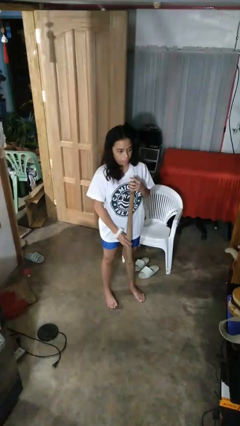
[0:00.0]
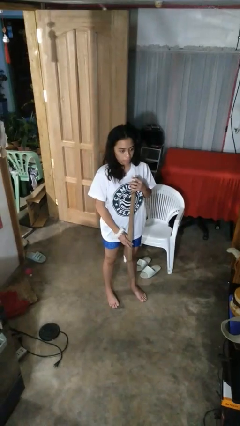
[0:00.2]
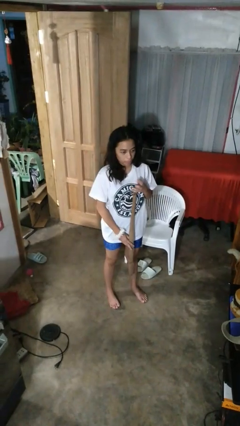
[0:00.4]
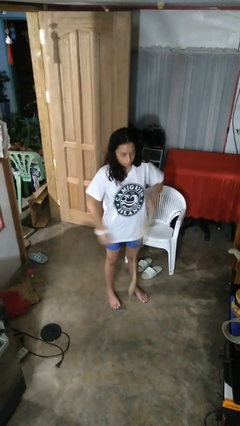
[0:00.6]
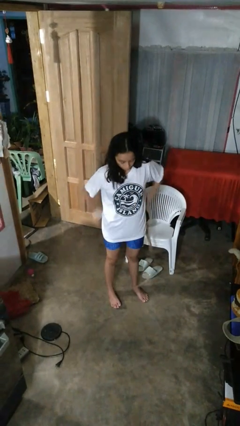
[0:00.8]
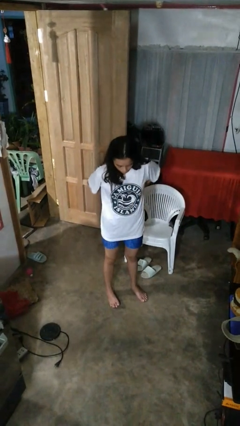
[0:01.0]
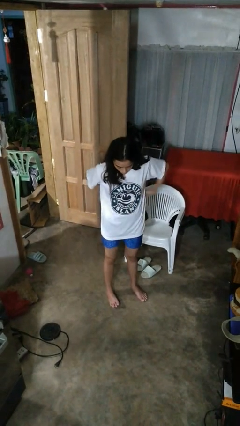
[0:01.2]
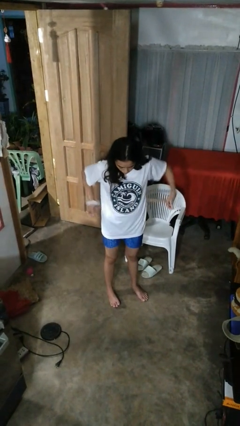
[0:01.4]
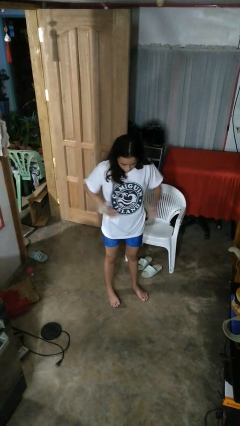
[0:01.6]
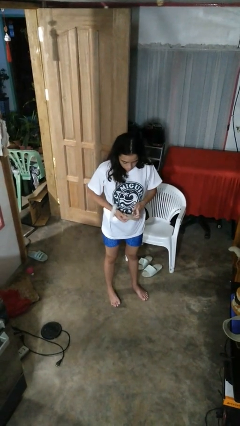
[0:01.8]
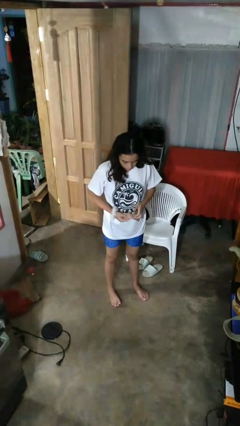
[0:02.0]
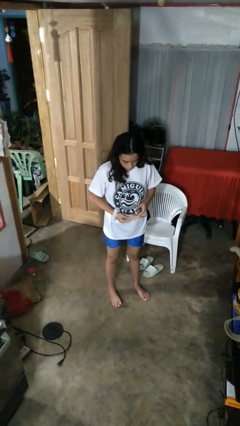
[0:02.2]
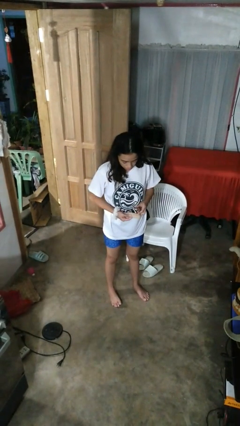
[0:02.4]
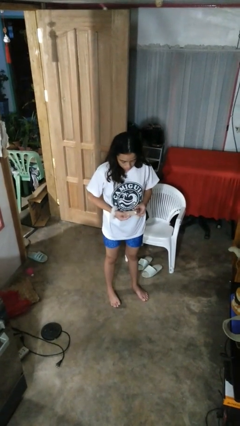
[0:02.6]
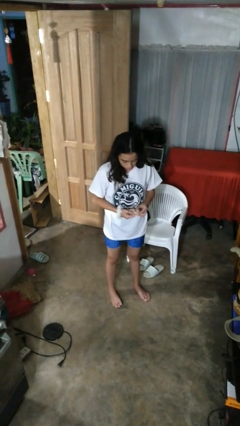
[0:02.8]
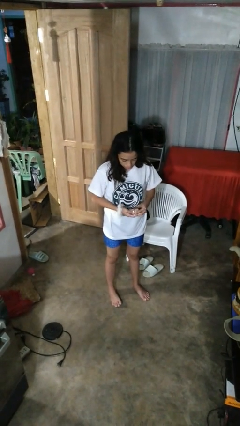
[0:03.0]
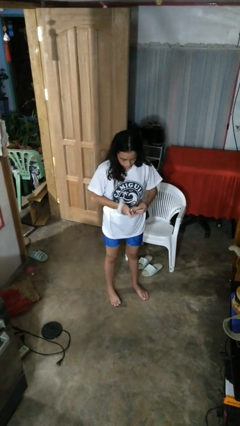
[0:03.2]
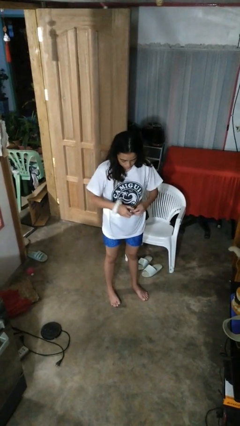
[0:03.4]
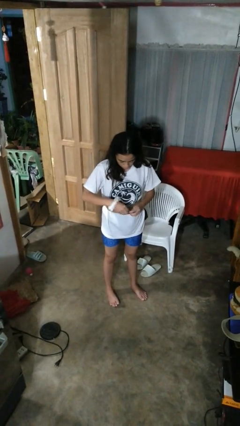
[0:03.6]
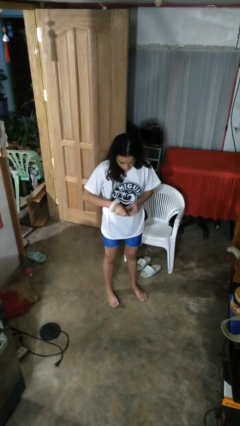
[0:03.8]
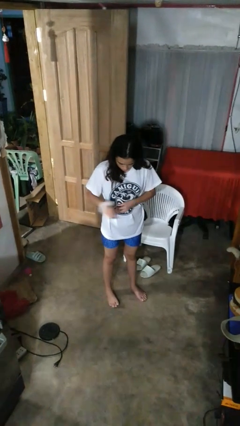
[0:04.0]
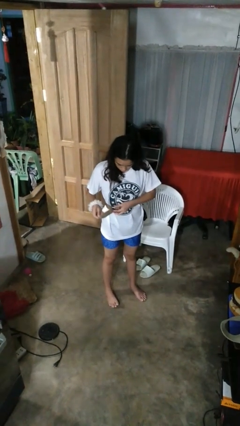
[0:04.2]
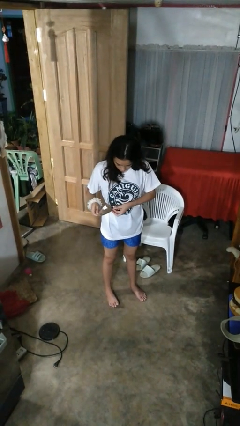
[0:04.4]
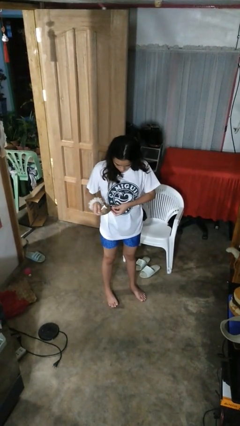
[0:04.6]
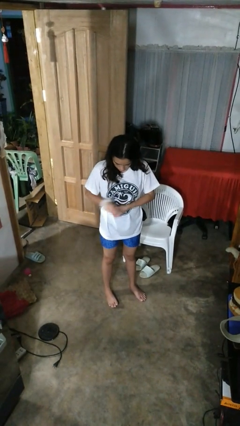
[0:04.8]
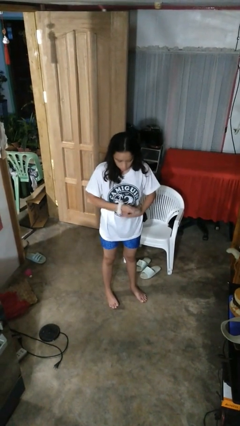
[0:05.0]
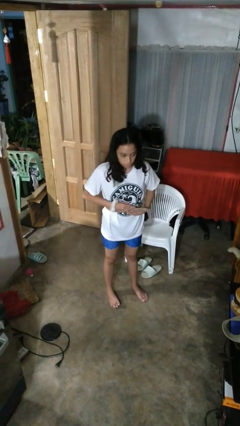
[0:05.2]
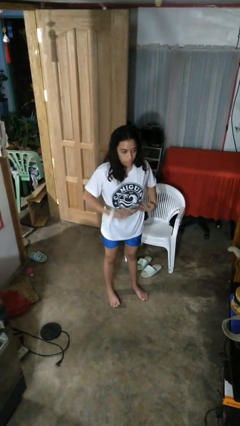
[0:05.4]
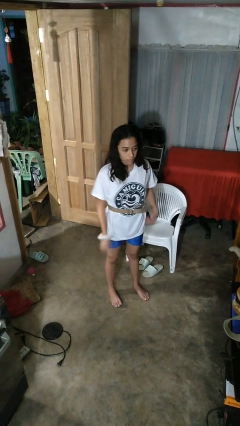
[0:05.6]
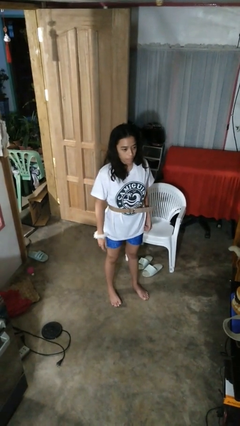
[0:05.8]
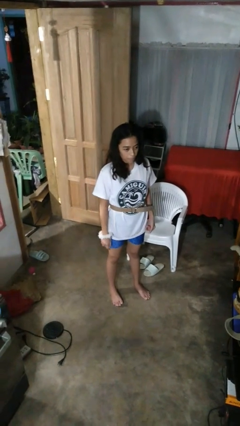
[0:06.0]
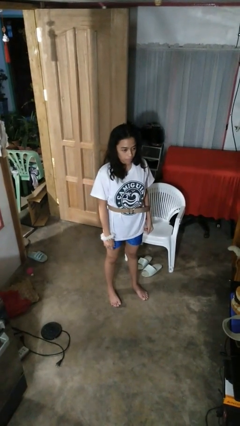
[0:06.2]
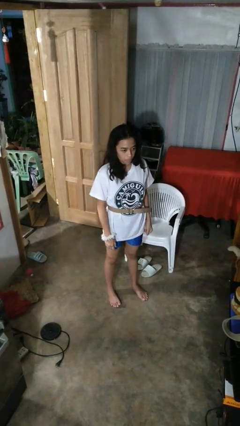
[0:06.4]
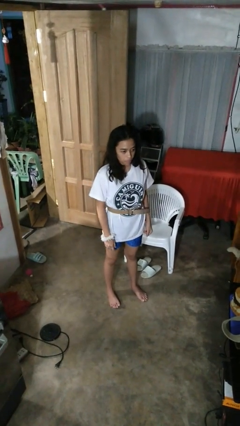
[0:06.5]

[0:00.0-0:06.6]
person puts on belt

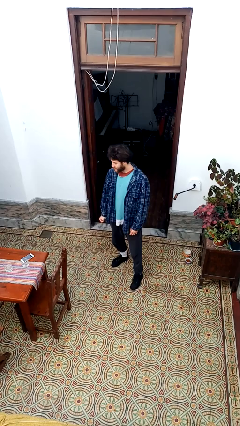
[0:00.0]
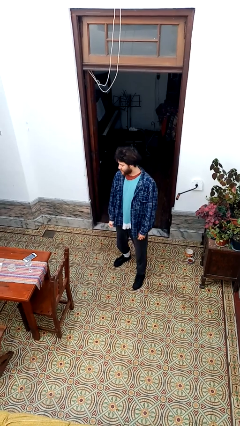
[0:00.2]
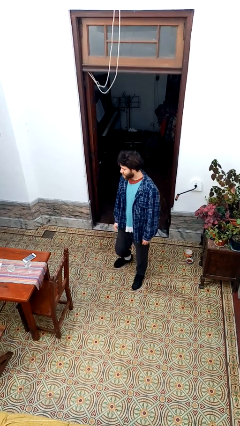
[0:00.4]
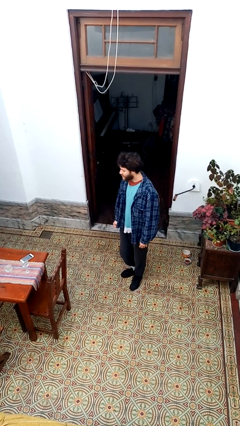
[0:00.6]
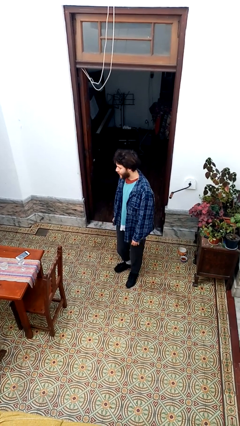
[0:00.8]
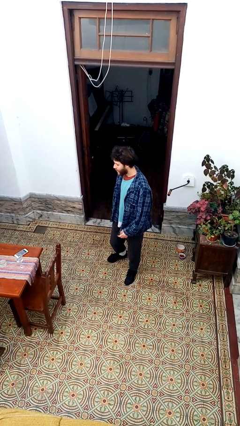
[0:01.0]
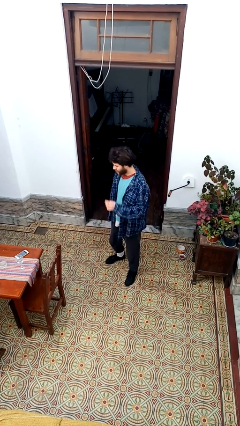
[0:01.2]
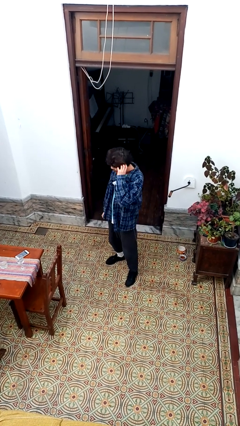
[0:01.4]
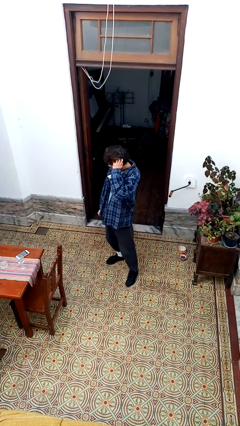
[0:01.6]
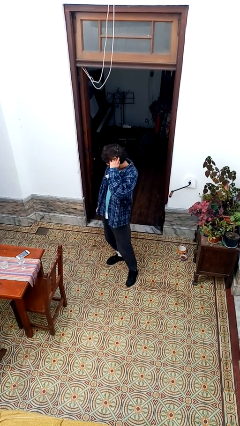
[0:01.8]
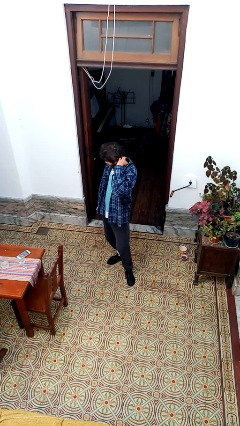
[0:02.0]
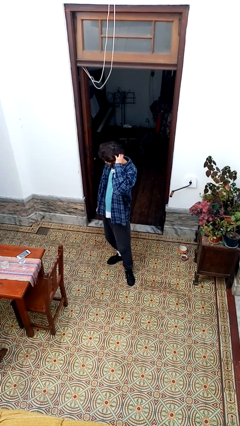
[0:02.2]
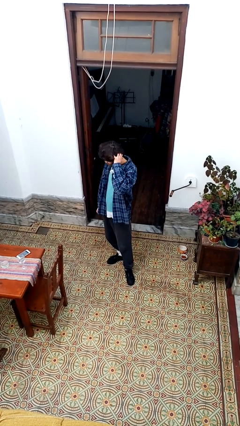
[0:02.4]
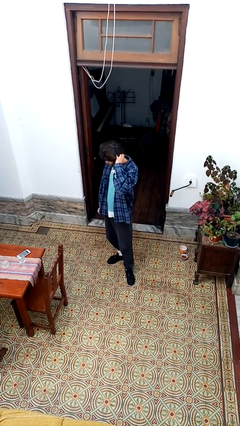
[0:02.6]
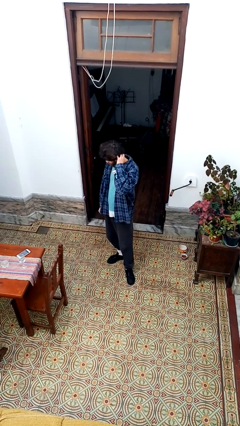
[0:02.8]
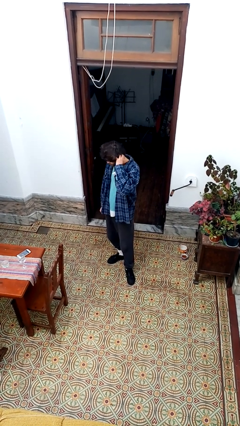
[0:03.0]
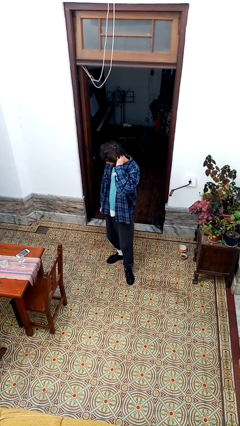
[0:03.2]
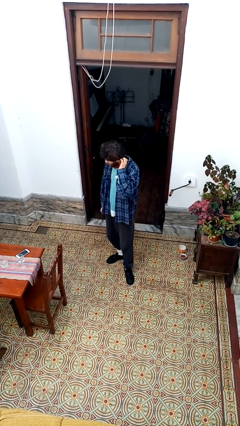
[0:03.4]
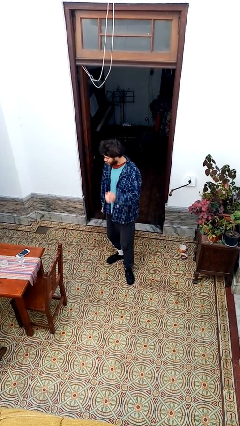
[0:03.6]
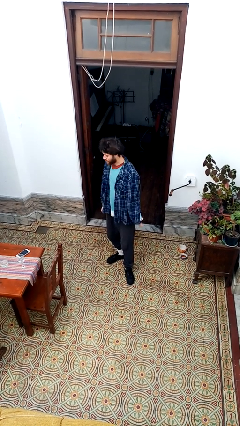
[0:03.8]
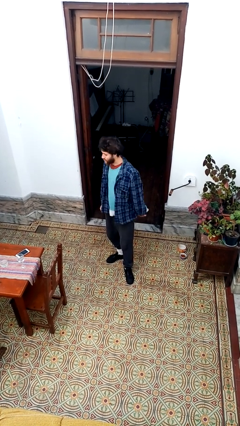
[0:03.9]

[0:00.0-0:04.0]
person scratches face

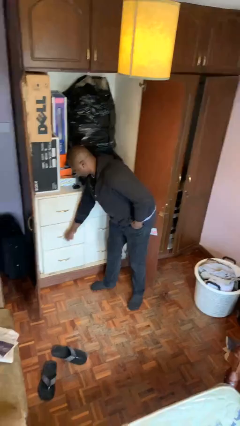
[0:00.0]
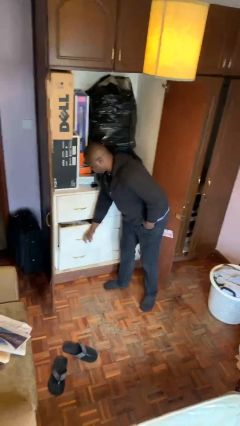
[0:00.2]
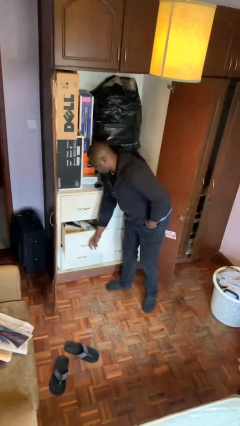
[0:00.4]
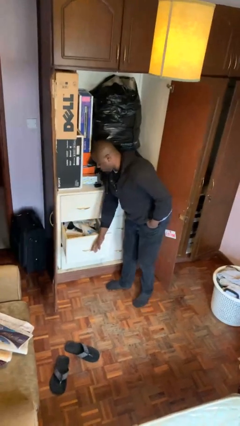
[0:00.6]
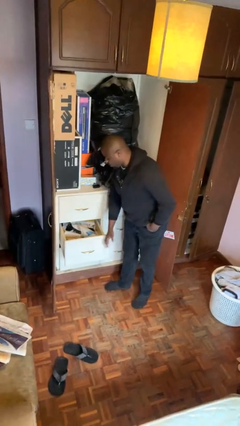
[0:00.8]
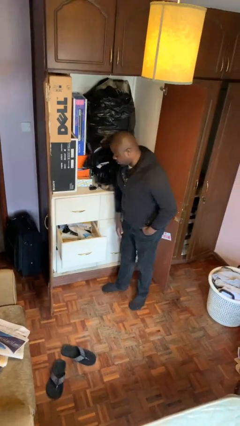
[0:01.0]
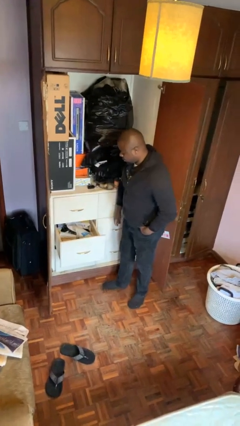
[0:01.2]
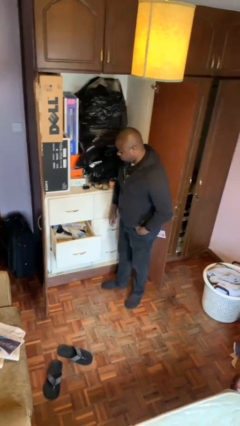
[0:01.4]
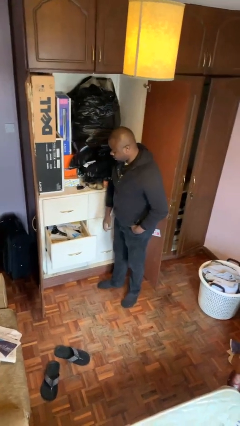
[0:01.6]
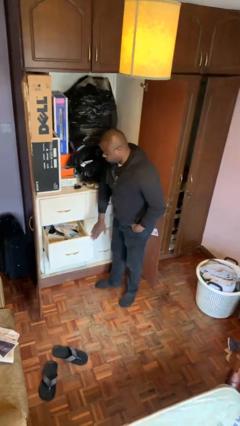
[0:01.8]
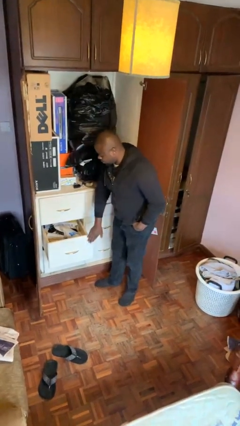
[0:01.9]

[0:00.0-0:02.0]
person opens dresser drawer

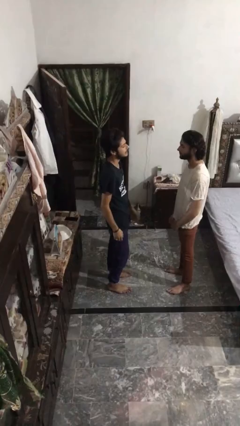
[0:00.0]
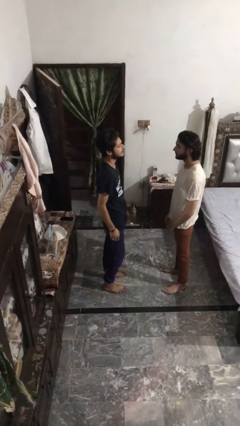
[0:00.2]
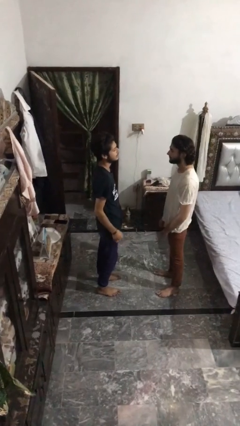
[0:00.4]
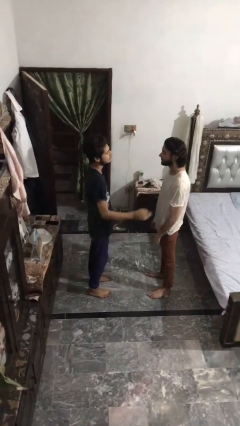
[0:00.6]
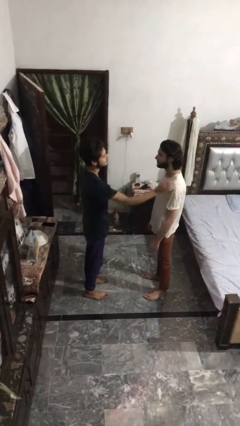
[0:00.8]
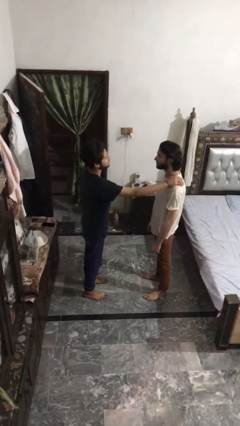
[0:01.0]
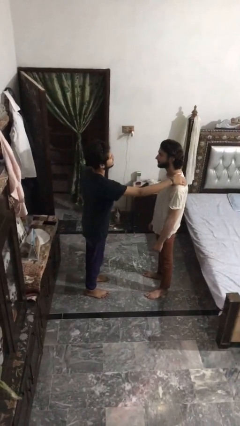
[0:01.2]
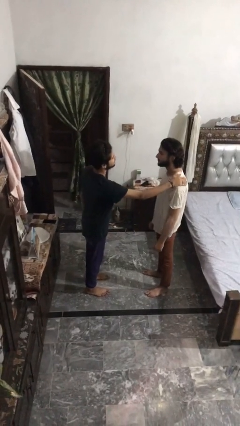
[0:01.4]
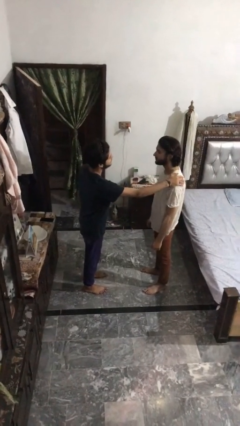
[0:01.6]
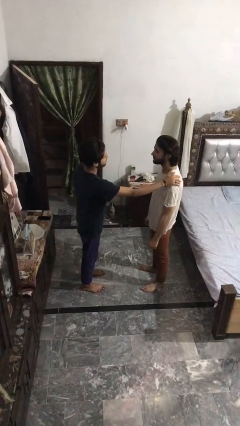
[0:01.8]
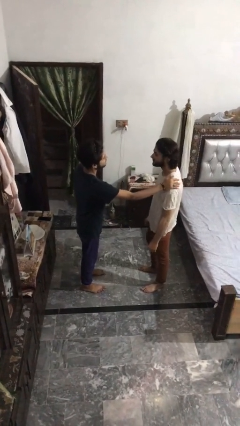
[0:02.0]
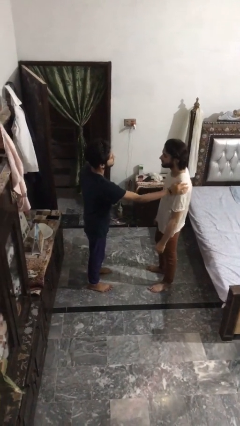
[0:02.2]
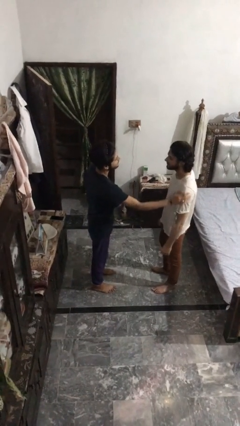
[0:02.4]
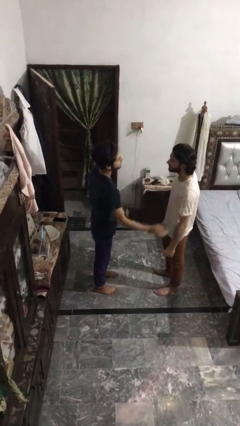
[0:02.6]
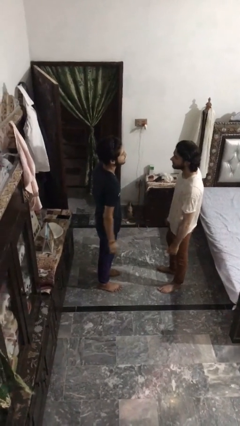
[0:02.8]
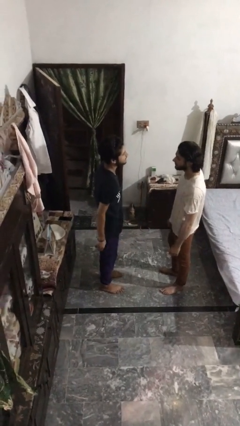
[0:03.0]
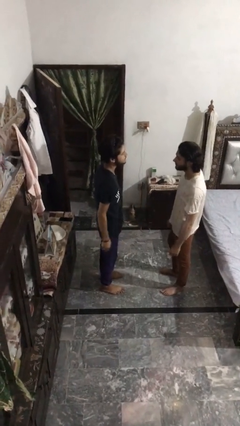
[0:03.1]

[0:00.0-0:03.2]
person pounds shoulders of person

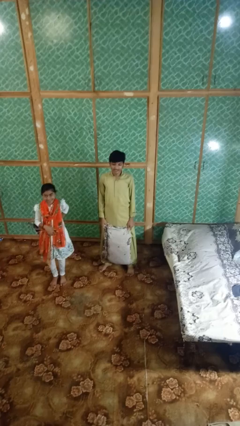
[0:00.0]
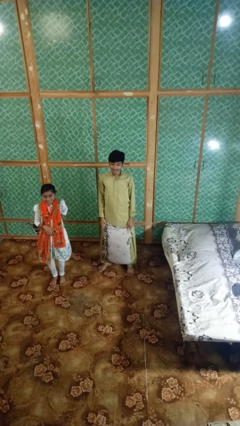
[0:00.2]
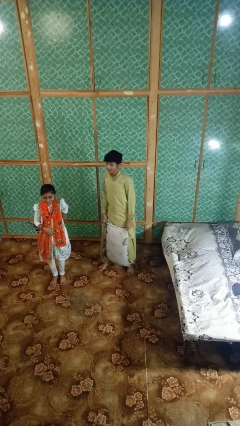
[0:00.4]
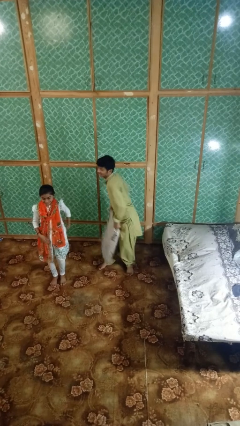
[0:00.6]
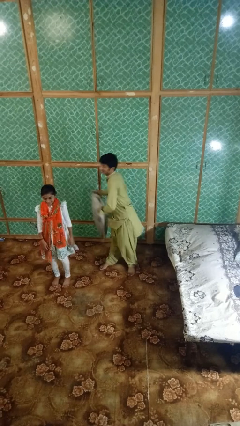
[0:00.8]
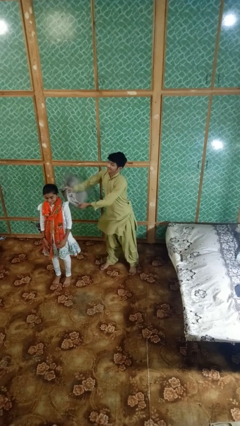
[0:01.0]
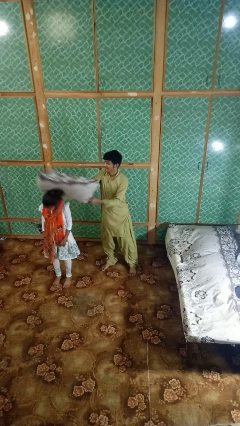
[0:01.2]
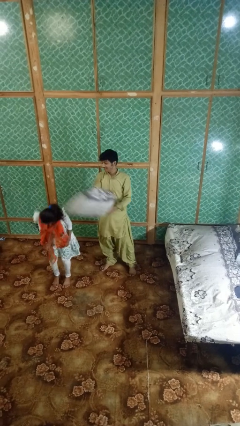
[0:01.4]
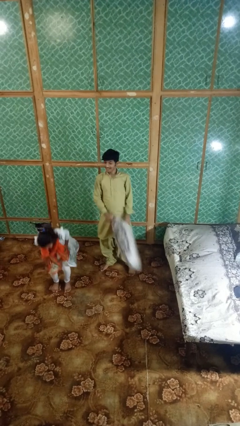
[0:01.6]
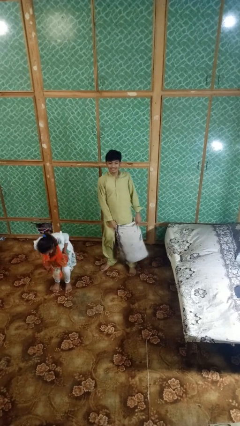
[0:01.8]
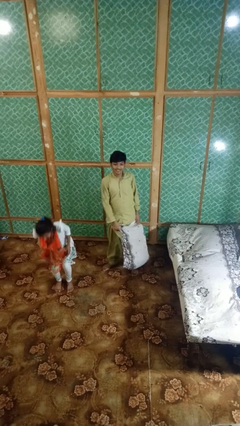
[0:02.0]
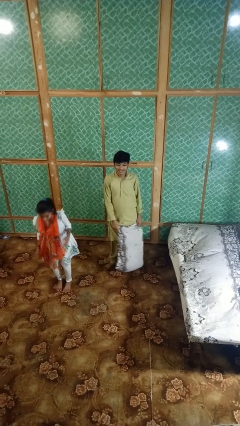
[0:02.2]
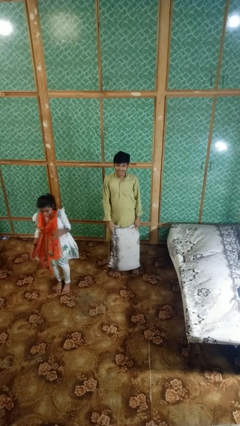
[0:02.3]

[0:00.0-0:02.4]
person hits person with pillow
